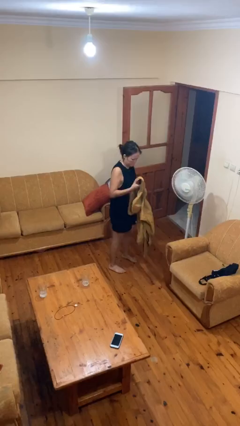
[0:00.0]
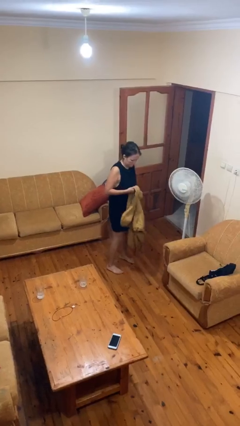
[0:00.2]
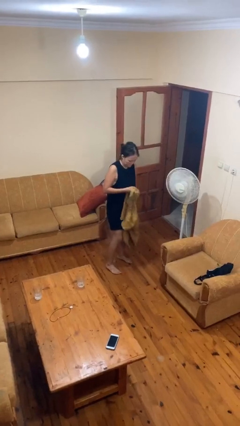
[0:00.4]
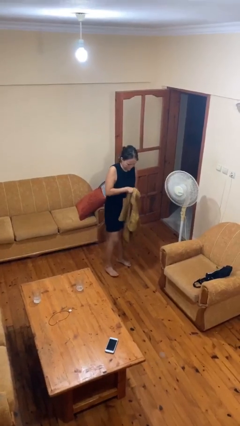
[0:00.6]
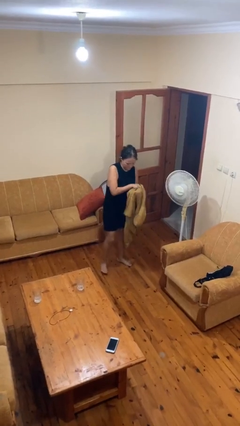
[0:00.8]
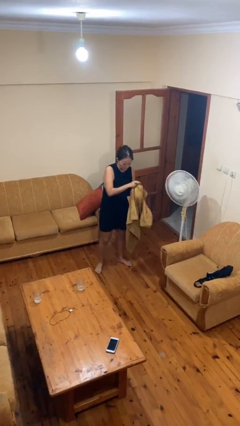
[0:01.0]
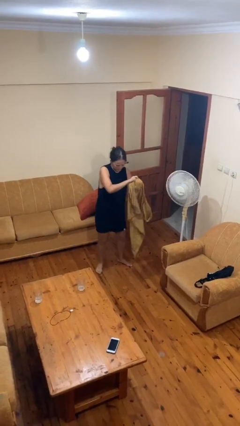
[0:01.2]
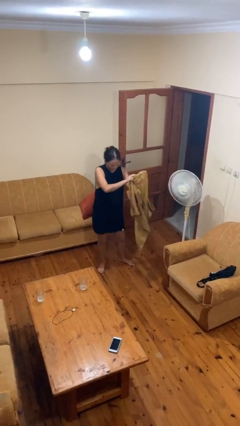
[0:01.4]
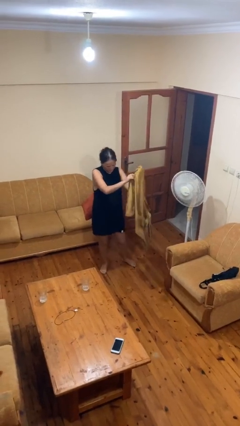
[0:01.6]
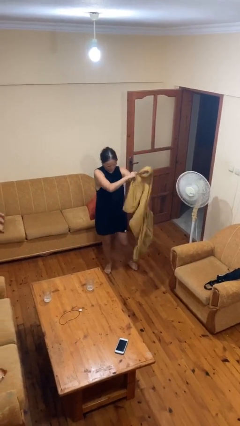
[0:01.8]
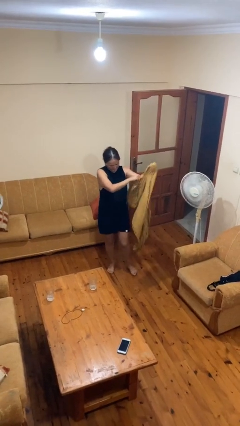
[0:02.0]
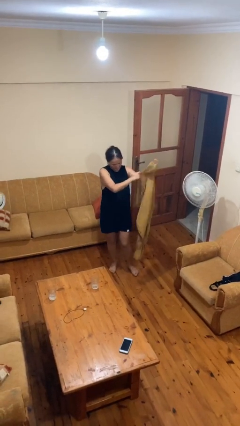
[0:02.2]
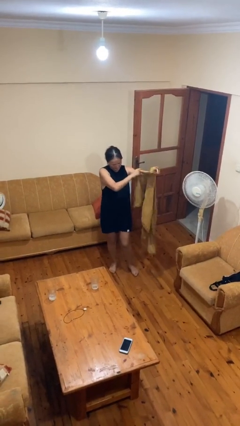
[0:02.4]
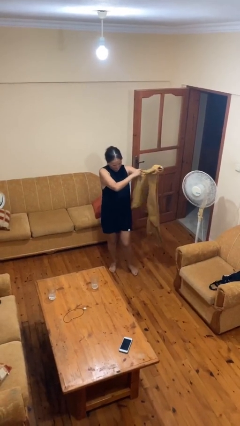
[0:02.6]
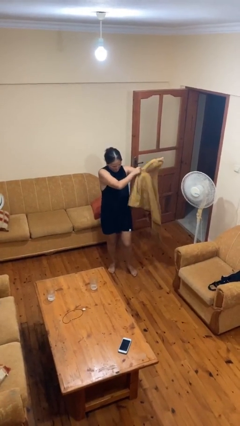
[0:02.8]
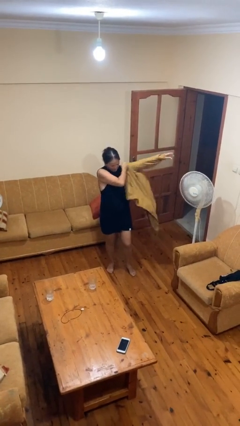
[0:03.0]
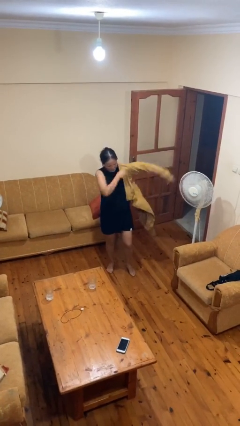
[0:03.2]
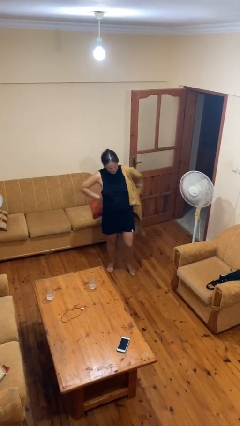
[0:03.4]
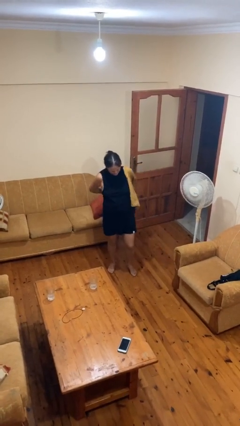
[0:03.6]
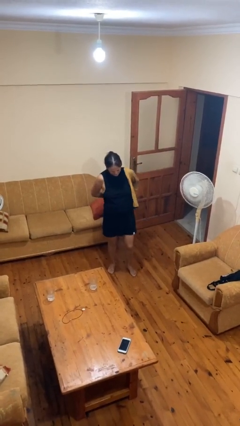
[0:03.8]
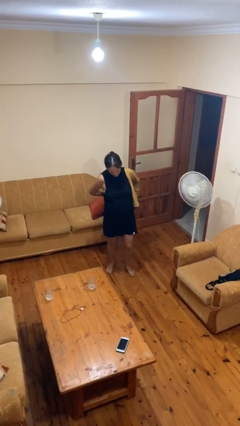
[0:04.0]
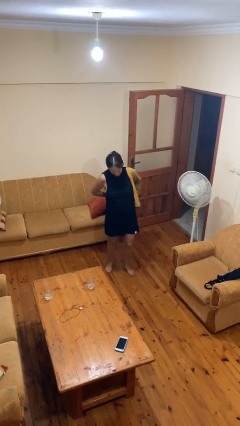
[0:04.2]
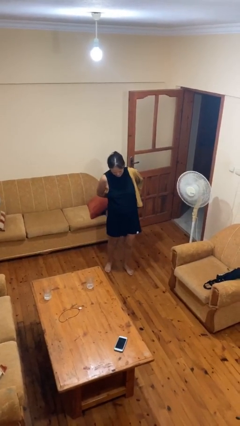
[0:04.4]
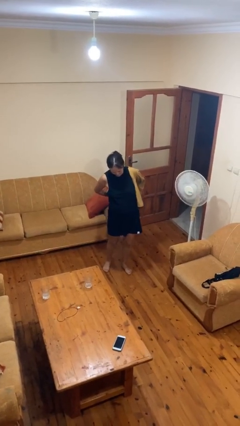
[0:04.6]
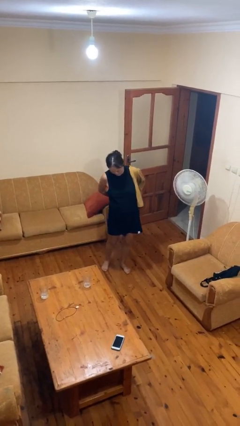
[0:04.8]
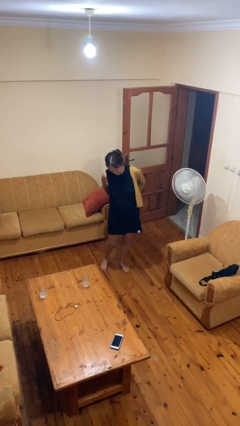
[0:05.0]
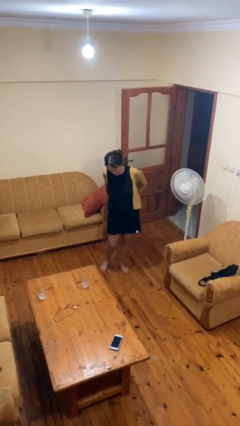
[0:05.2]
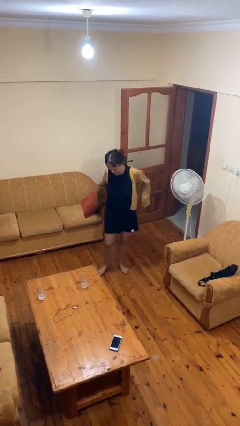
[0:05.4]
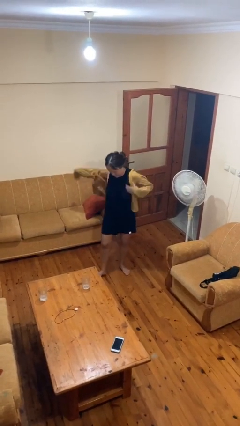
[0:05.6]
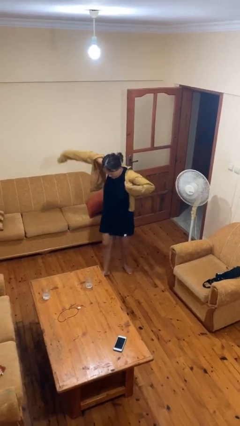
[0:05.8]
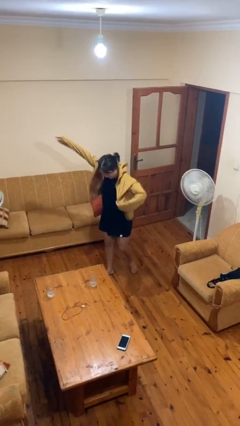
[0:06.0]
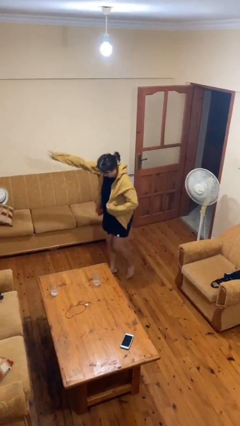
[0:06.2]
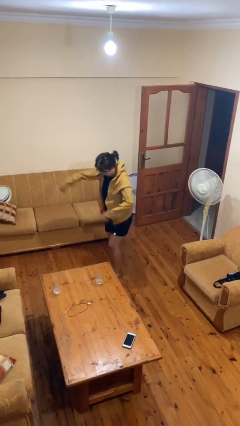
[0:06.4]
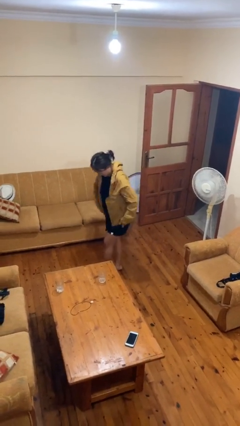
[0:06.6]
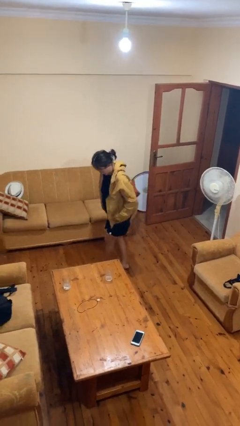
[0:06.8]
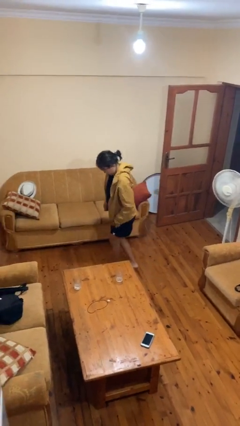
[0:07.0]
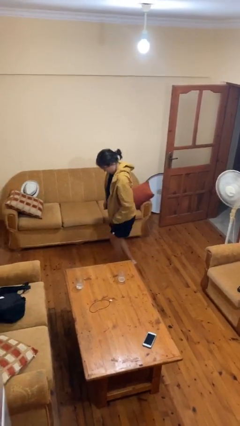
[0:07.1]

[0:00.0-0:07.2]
person puts on jacket

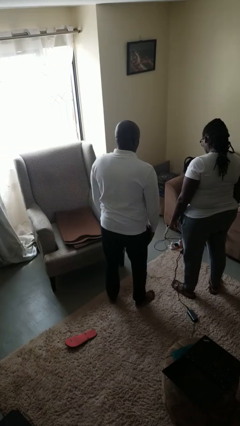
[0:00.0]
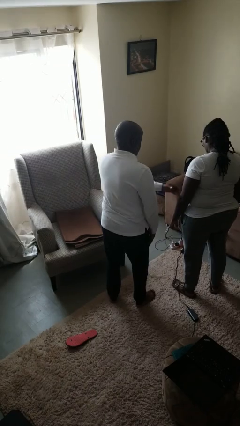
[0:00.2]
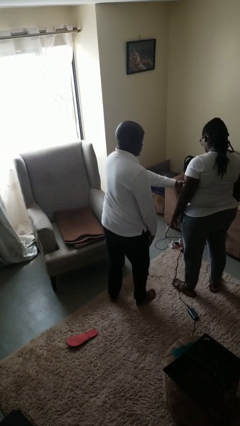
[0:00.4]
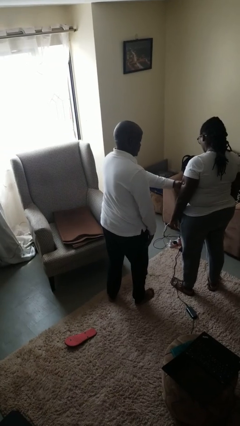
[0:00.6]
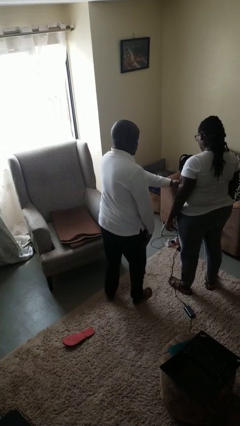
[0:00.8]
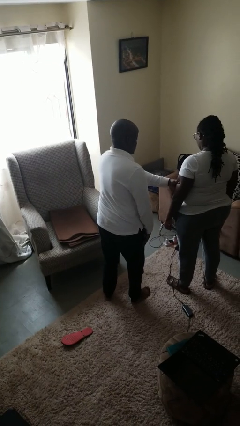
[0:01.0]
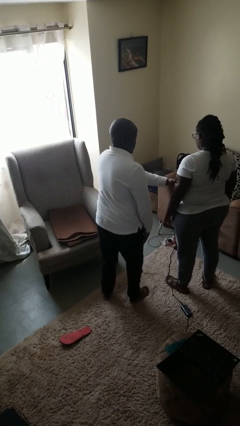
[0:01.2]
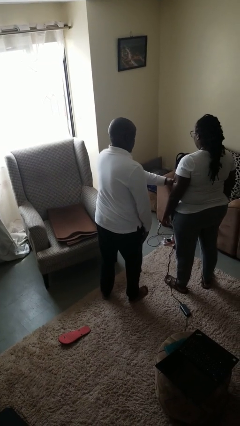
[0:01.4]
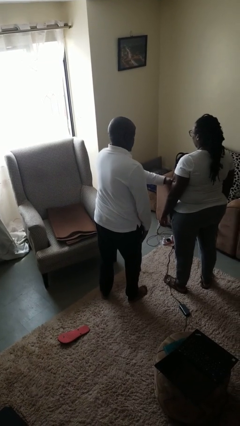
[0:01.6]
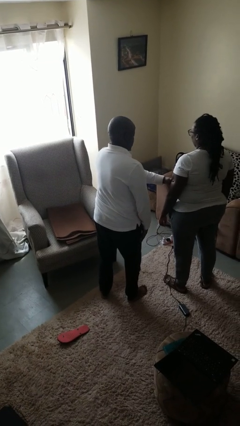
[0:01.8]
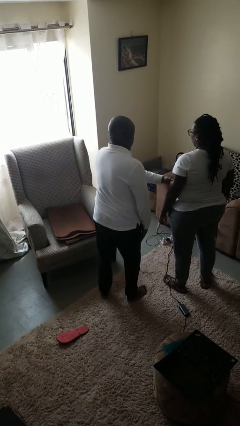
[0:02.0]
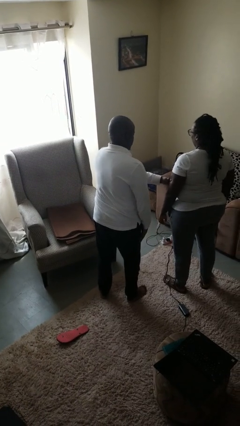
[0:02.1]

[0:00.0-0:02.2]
person grabs person by bicep

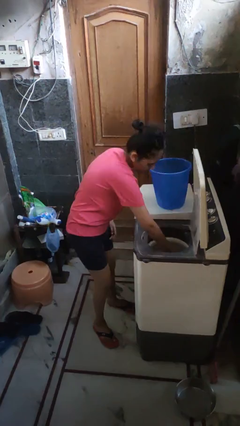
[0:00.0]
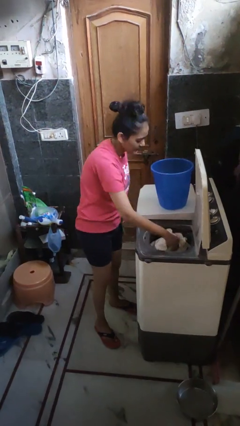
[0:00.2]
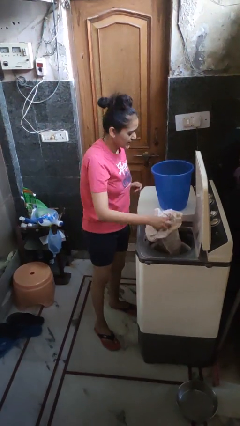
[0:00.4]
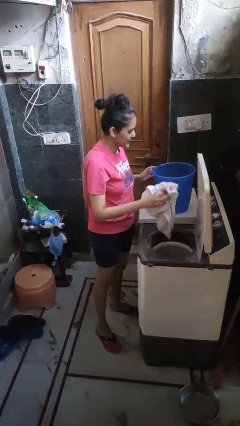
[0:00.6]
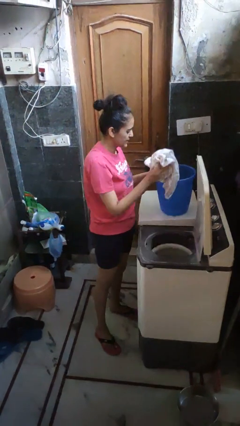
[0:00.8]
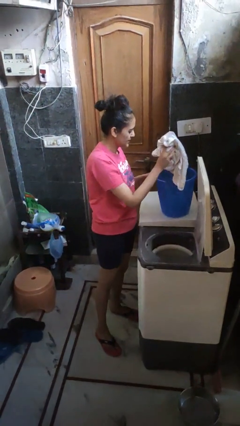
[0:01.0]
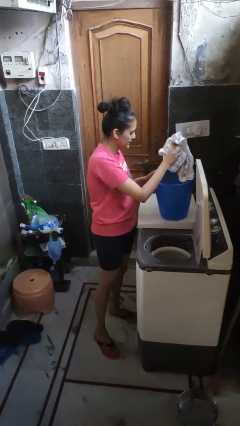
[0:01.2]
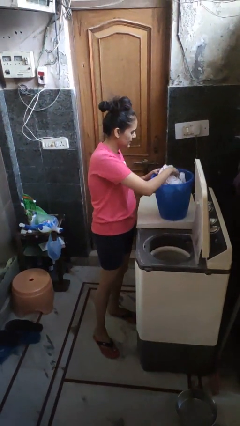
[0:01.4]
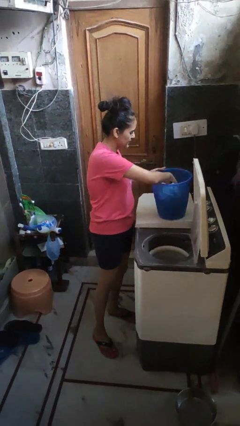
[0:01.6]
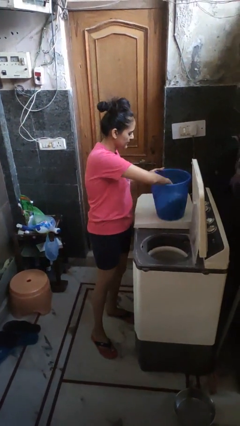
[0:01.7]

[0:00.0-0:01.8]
person takes clothes from dresser

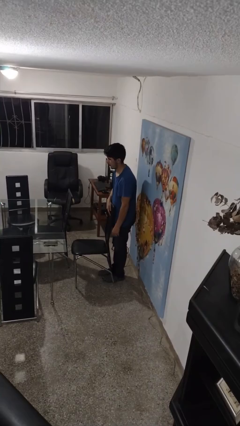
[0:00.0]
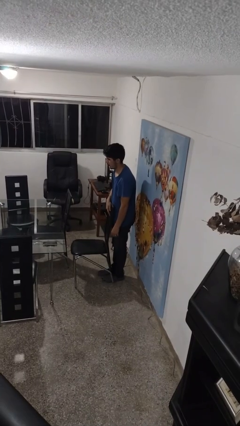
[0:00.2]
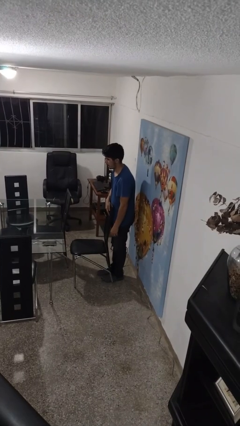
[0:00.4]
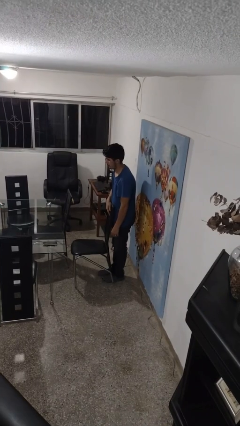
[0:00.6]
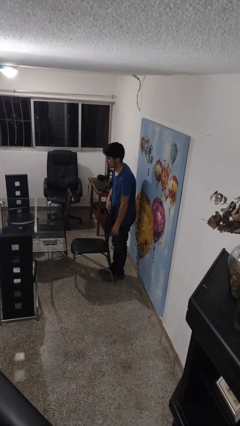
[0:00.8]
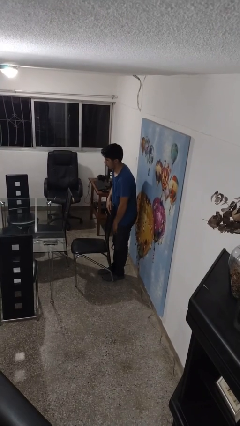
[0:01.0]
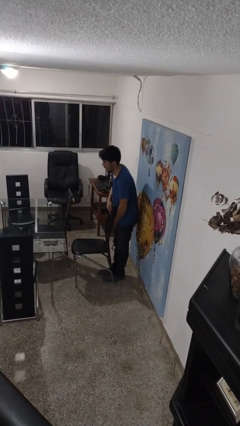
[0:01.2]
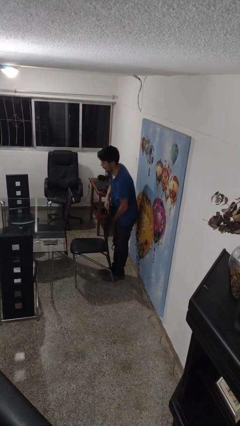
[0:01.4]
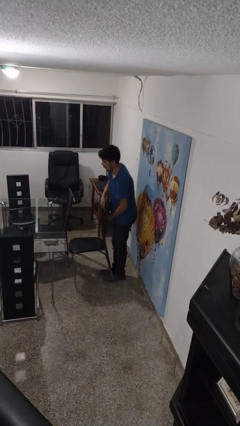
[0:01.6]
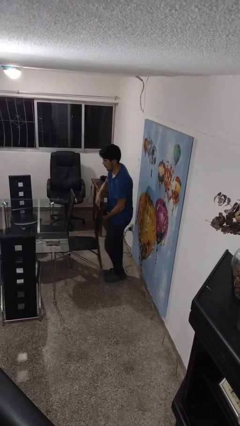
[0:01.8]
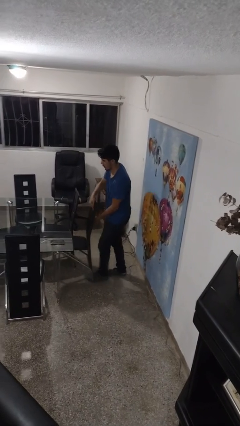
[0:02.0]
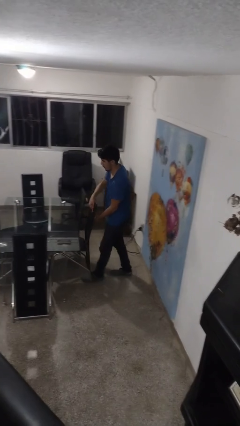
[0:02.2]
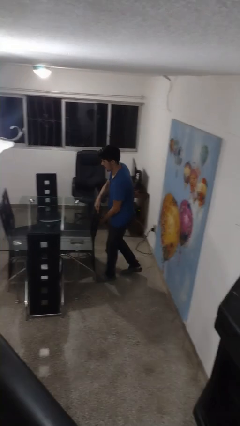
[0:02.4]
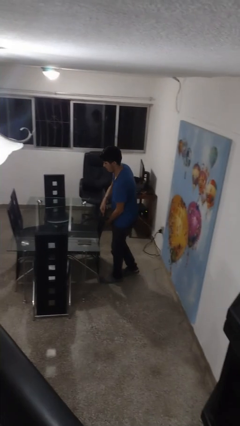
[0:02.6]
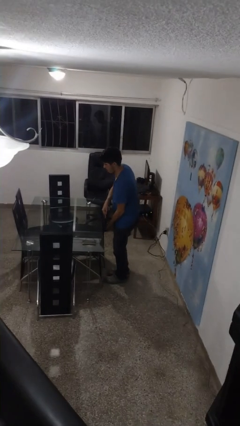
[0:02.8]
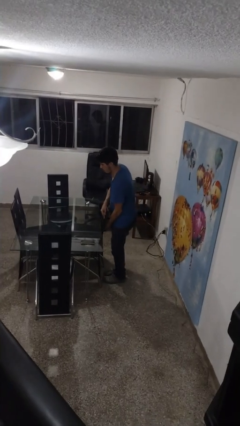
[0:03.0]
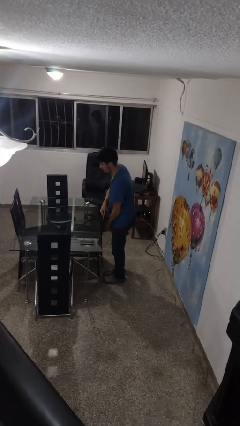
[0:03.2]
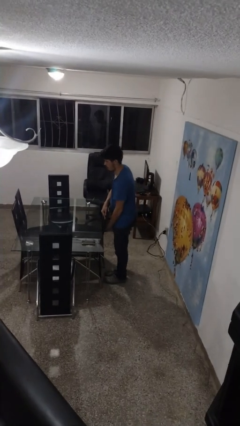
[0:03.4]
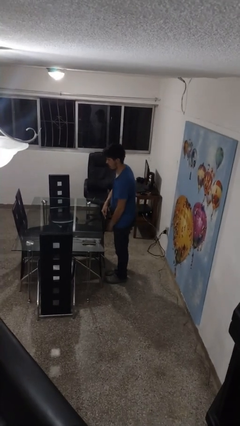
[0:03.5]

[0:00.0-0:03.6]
person pushes in chair

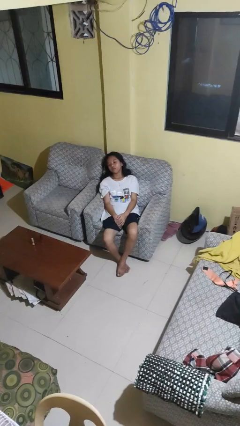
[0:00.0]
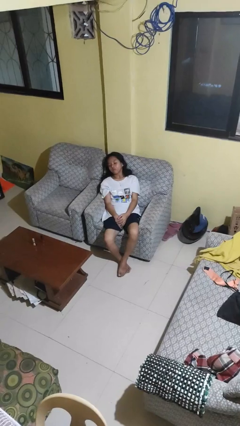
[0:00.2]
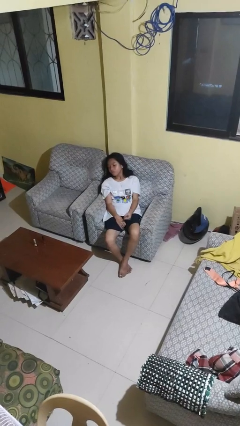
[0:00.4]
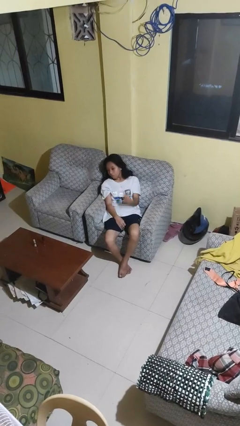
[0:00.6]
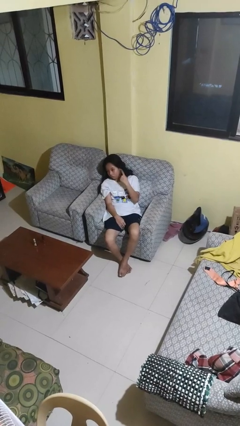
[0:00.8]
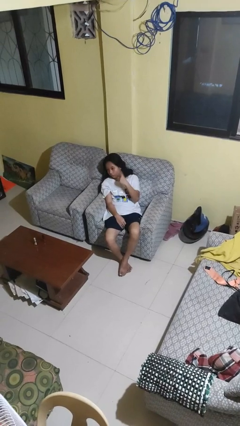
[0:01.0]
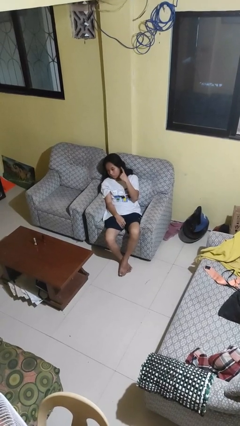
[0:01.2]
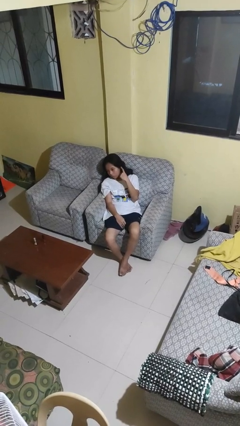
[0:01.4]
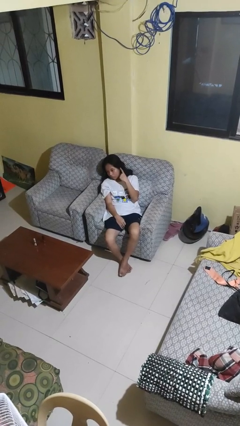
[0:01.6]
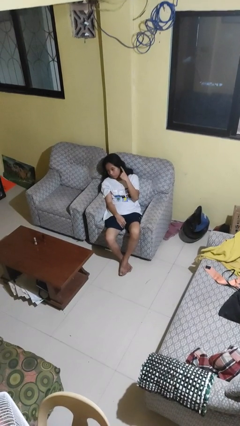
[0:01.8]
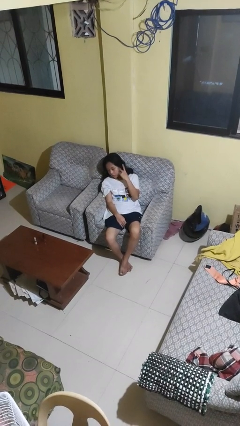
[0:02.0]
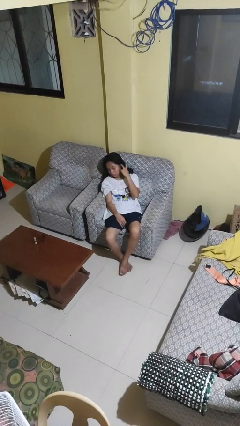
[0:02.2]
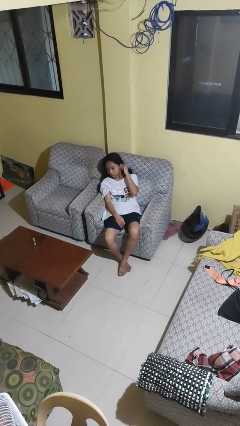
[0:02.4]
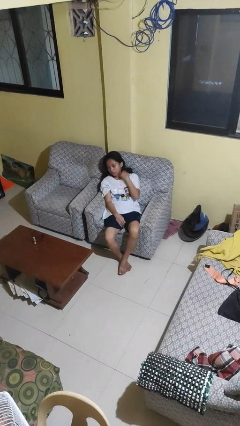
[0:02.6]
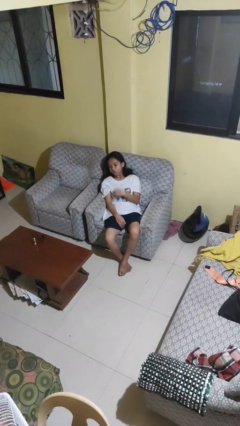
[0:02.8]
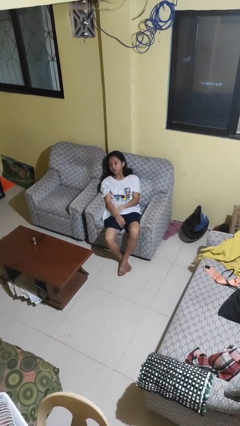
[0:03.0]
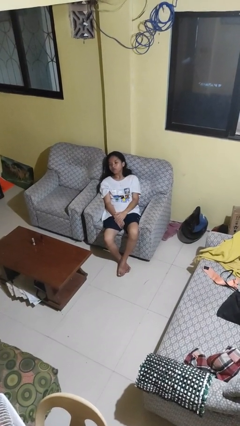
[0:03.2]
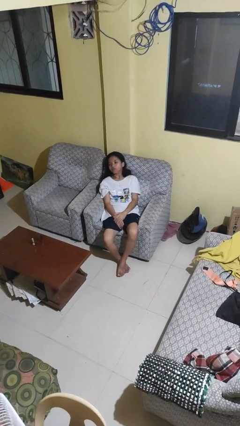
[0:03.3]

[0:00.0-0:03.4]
person gestures listen closely
